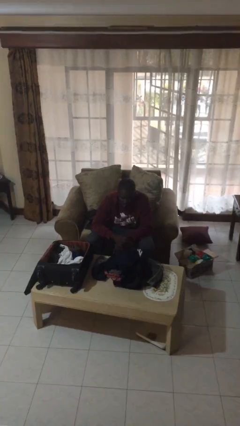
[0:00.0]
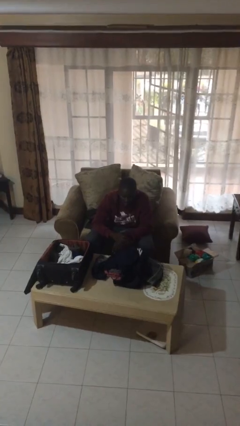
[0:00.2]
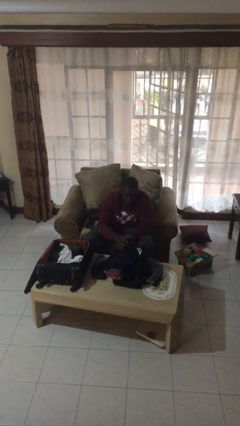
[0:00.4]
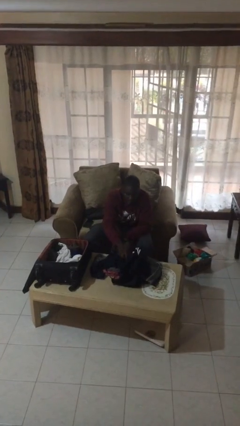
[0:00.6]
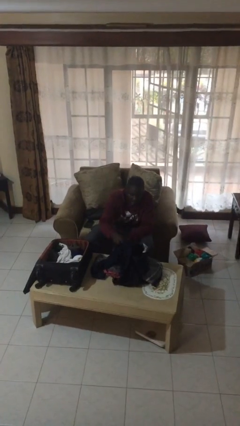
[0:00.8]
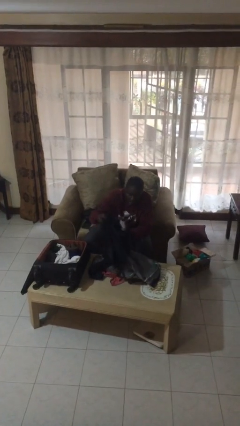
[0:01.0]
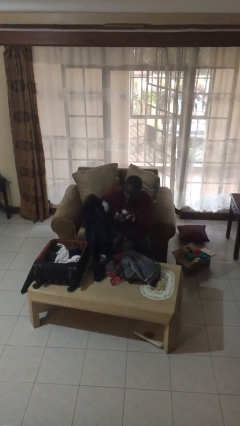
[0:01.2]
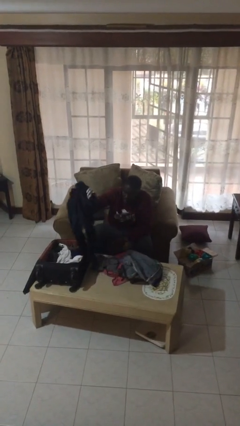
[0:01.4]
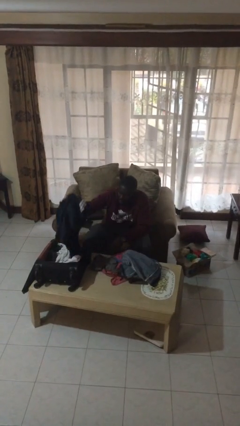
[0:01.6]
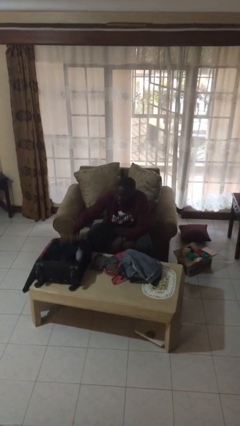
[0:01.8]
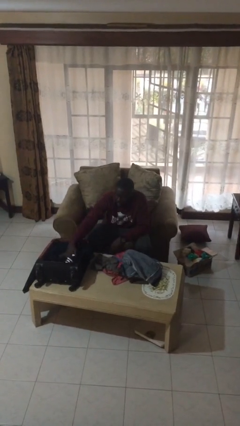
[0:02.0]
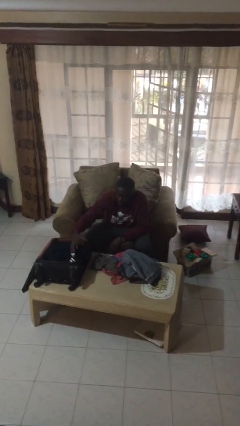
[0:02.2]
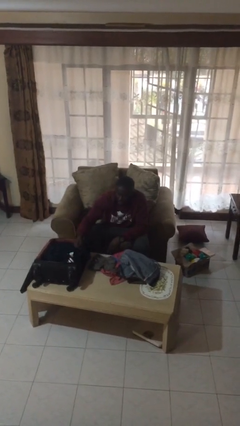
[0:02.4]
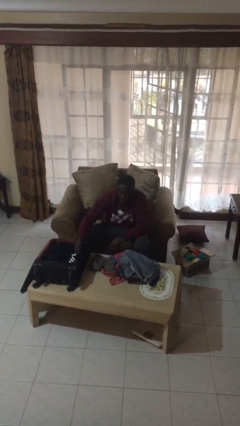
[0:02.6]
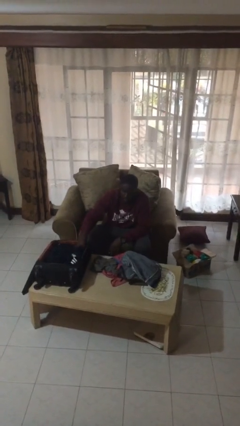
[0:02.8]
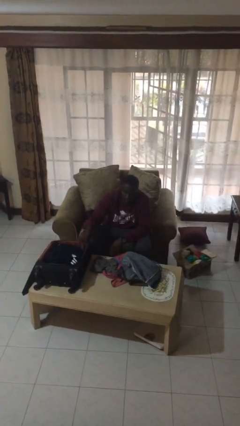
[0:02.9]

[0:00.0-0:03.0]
person loads clothes into suitcase

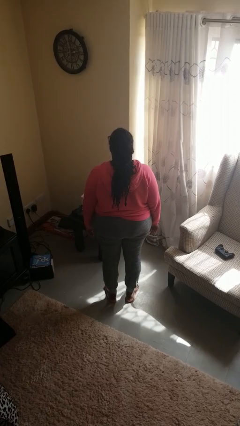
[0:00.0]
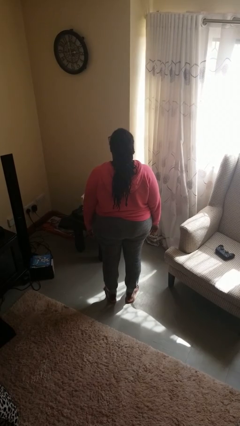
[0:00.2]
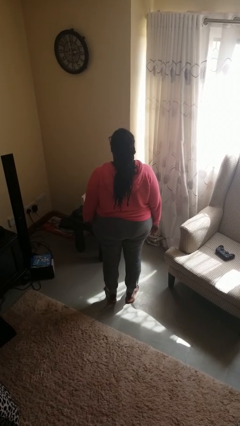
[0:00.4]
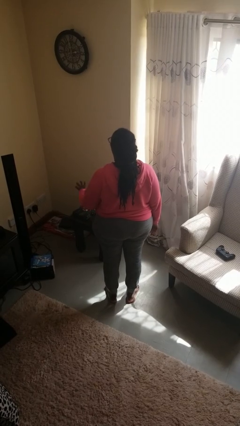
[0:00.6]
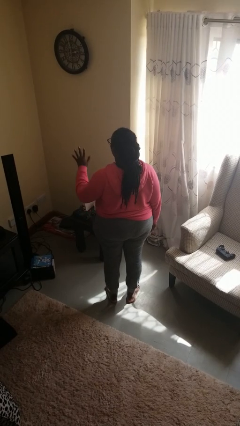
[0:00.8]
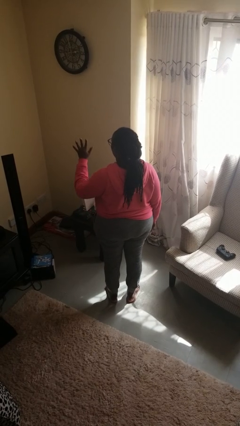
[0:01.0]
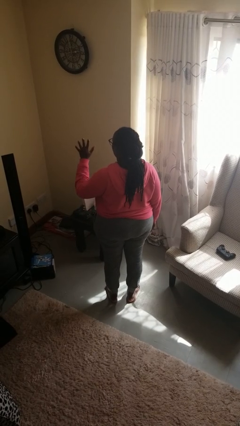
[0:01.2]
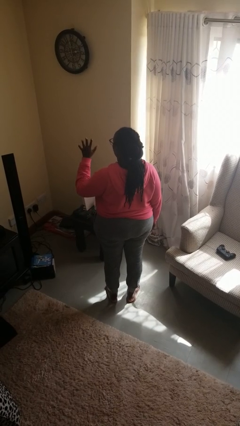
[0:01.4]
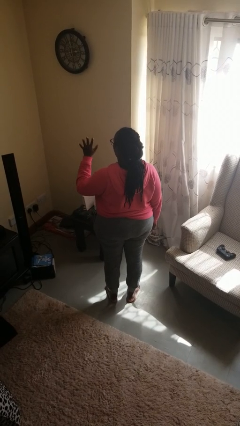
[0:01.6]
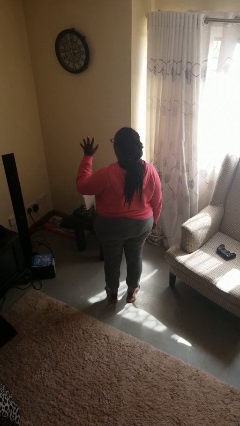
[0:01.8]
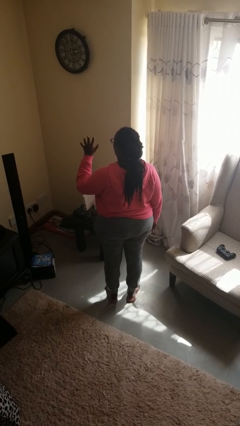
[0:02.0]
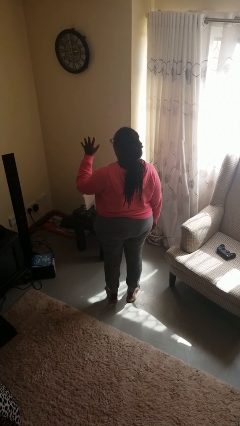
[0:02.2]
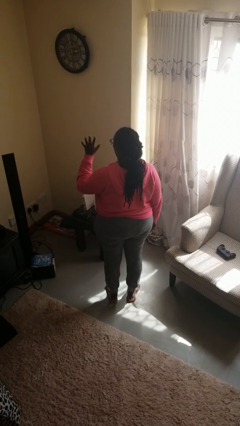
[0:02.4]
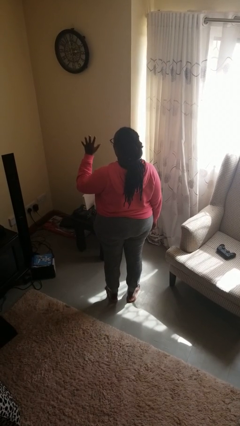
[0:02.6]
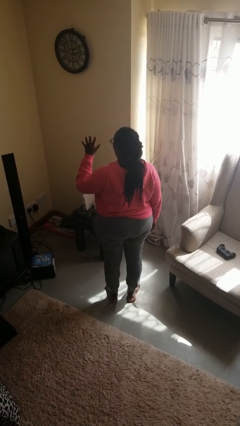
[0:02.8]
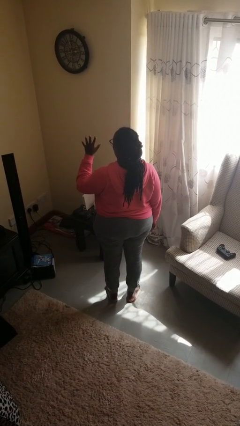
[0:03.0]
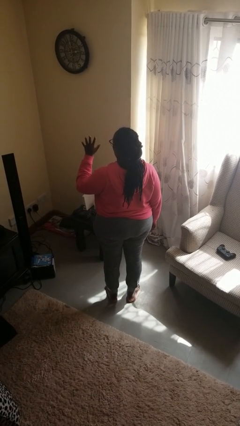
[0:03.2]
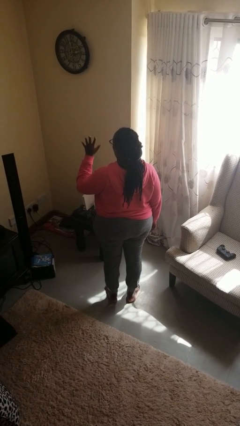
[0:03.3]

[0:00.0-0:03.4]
person gestures number five

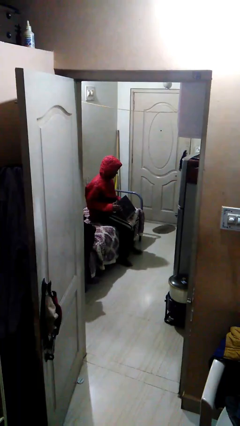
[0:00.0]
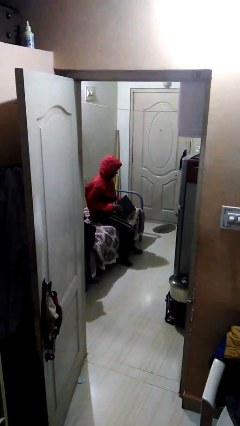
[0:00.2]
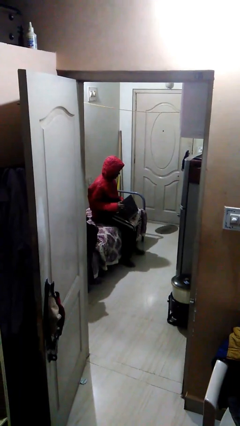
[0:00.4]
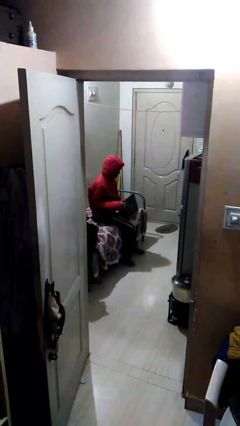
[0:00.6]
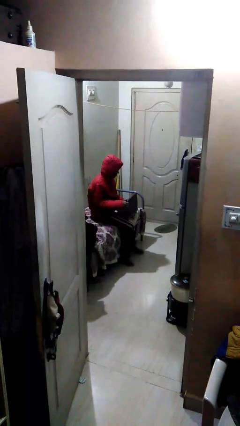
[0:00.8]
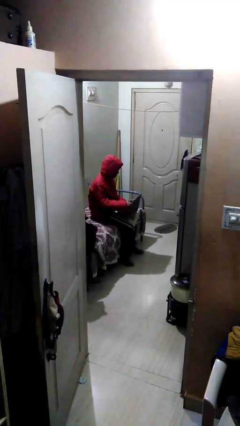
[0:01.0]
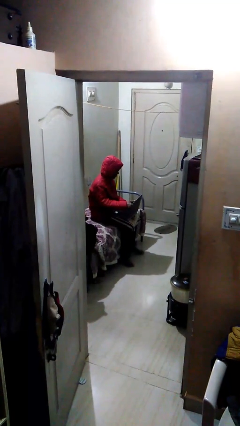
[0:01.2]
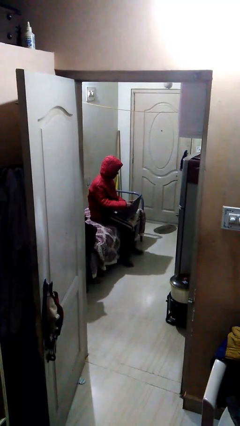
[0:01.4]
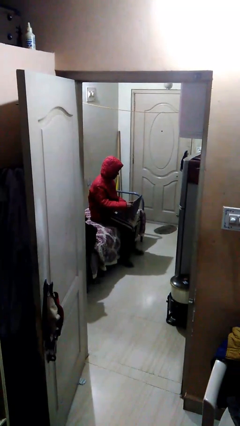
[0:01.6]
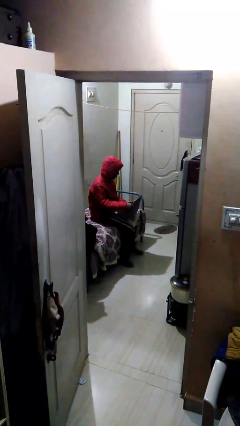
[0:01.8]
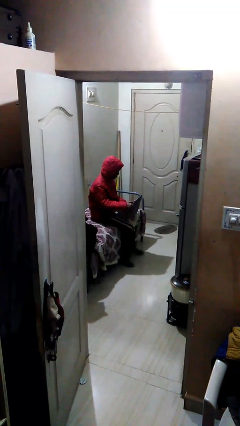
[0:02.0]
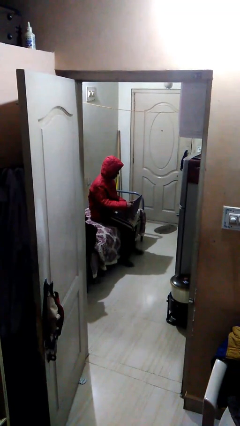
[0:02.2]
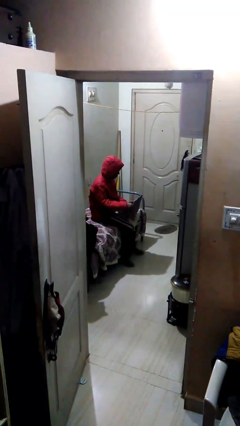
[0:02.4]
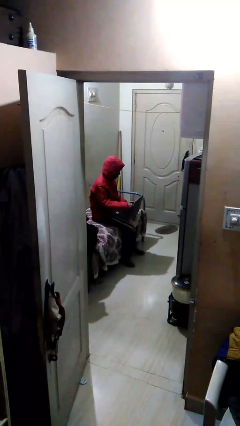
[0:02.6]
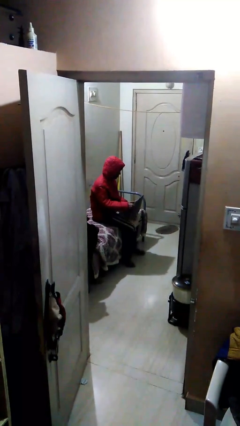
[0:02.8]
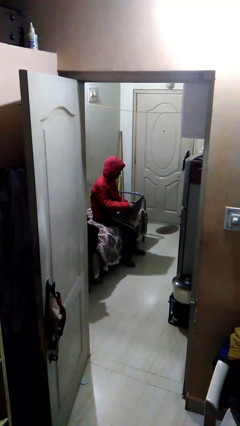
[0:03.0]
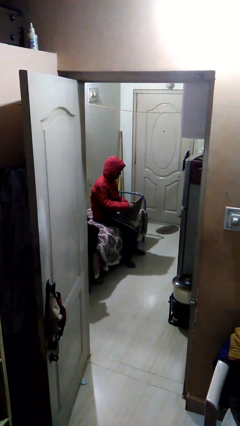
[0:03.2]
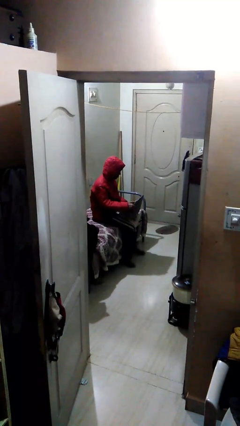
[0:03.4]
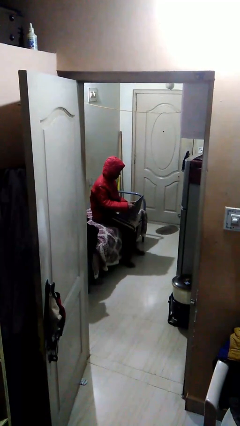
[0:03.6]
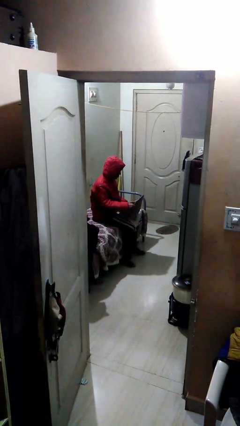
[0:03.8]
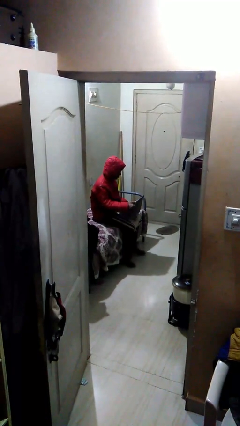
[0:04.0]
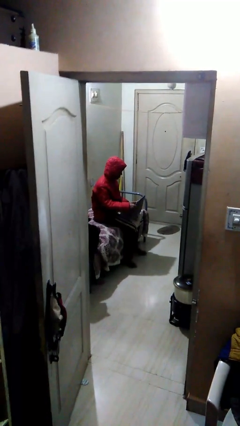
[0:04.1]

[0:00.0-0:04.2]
person interacts with laptop

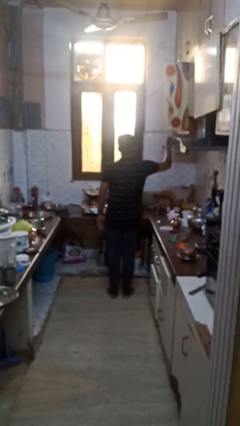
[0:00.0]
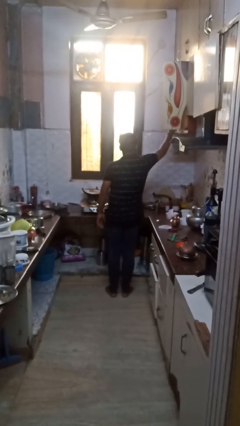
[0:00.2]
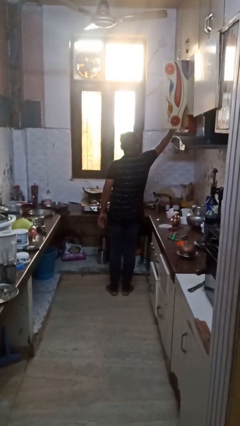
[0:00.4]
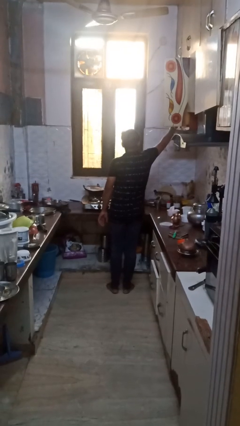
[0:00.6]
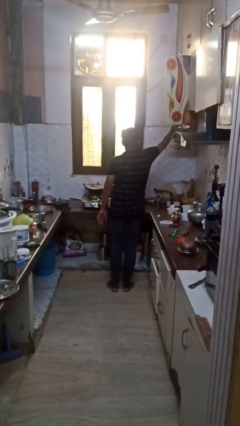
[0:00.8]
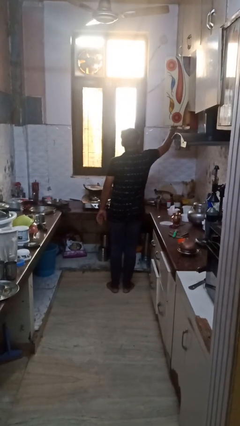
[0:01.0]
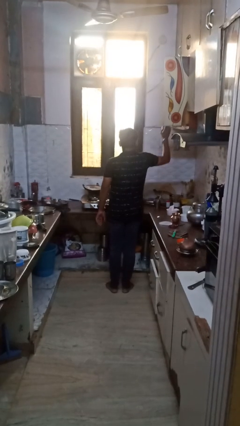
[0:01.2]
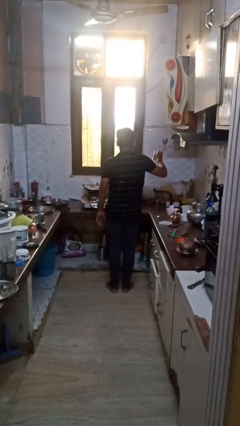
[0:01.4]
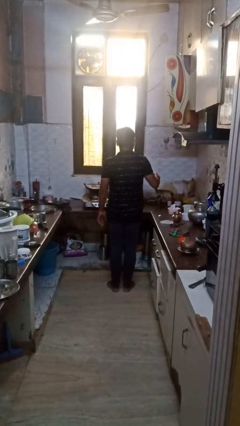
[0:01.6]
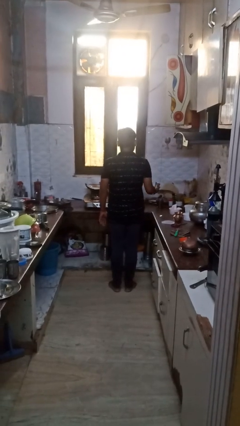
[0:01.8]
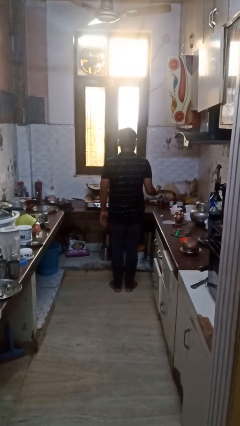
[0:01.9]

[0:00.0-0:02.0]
person puts object in cabinet

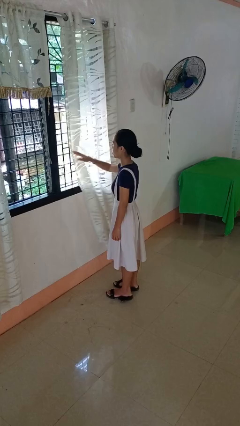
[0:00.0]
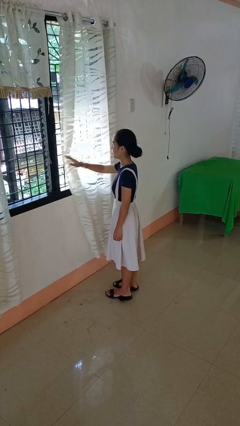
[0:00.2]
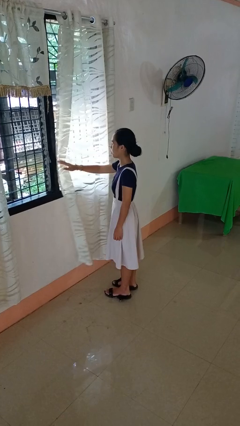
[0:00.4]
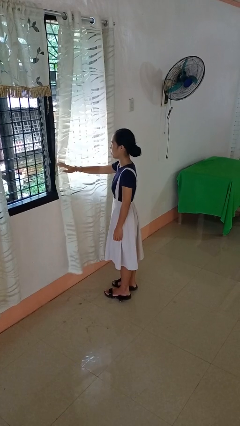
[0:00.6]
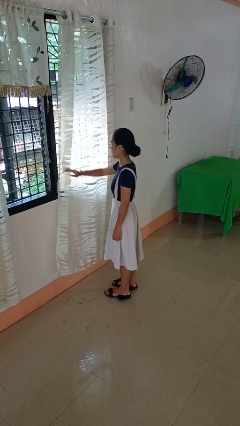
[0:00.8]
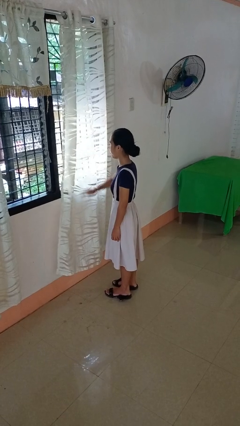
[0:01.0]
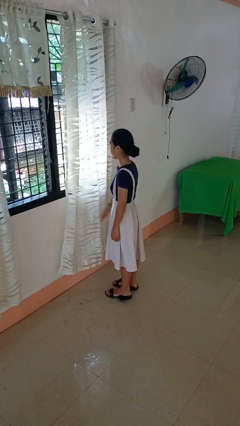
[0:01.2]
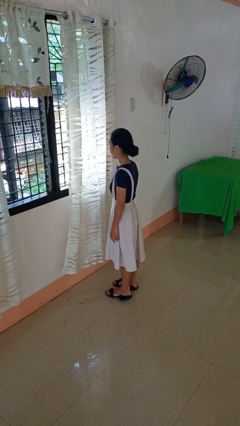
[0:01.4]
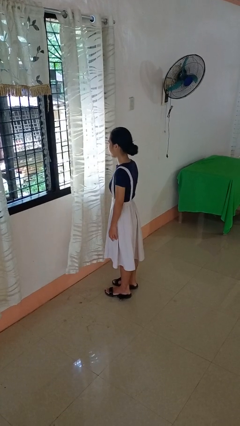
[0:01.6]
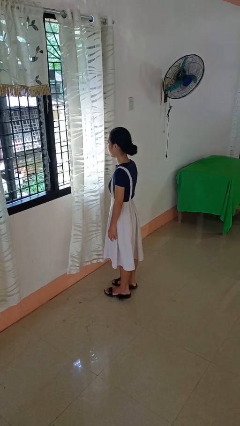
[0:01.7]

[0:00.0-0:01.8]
person closes curtains

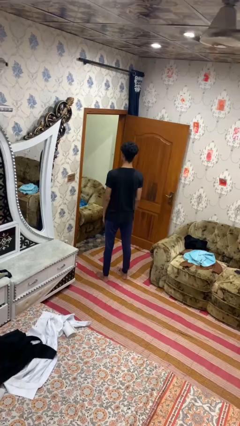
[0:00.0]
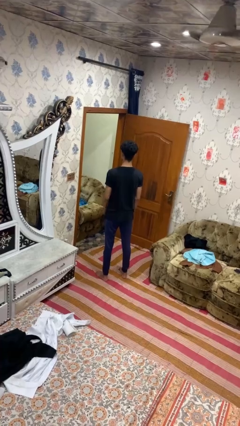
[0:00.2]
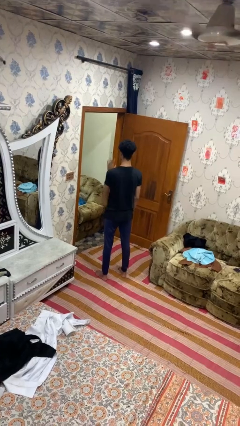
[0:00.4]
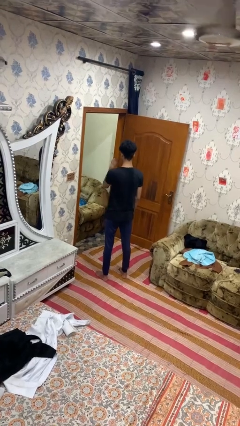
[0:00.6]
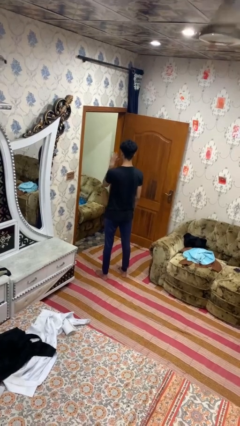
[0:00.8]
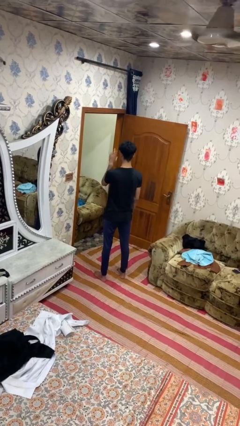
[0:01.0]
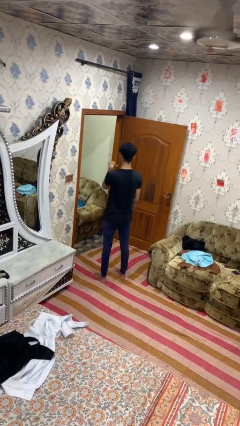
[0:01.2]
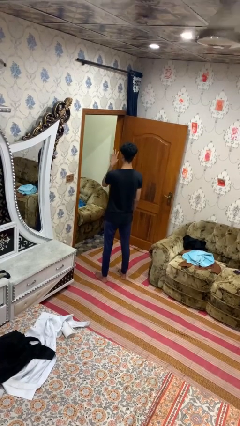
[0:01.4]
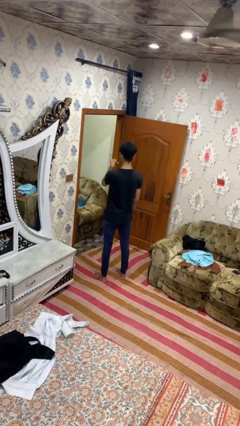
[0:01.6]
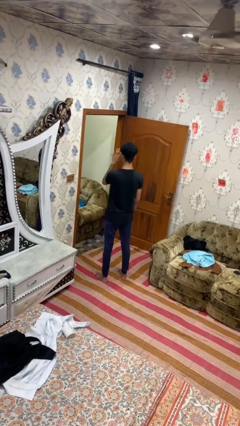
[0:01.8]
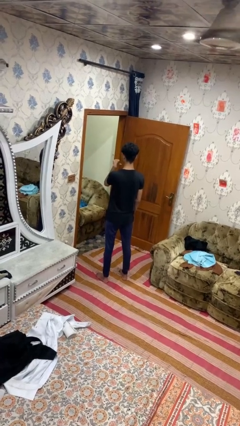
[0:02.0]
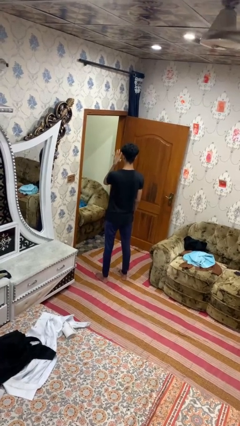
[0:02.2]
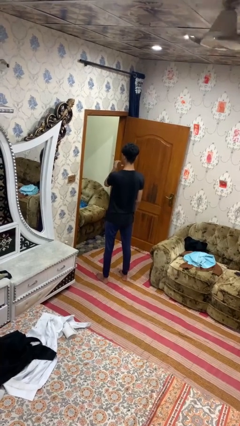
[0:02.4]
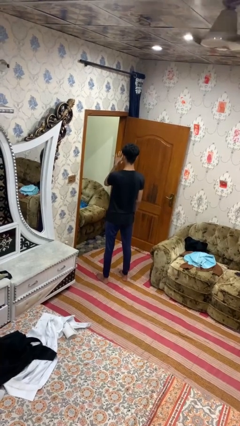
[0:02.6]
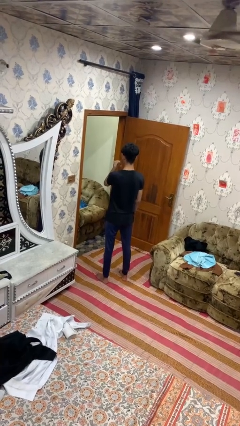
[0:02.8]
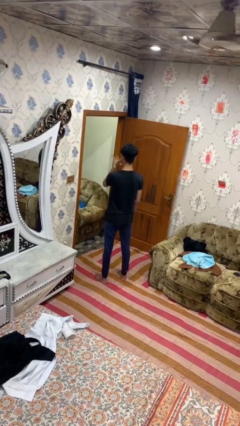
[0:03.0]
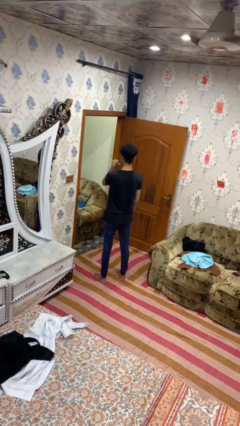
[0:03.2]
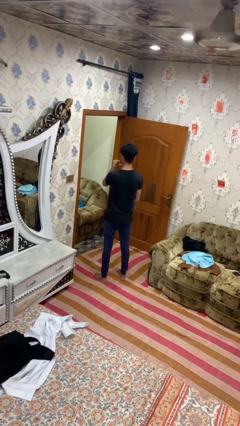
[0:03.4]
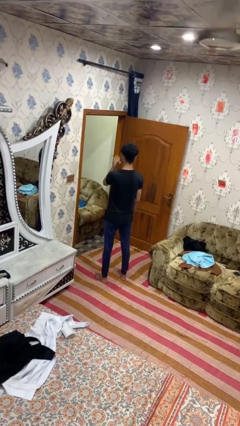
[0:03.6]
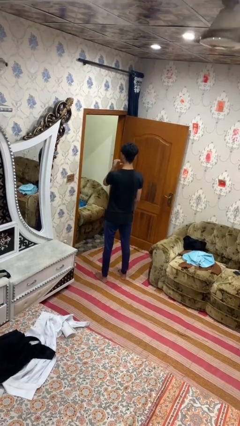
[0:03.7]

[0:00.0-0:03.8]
person gestures listen closely
